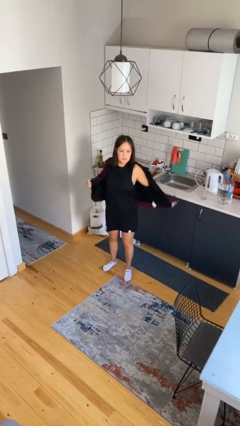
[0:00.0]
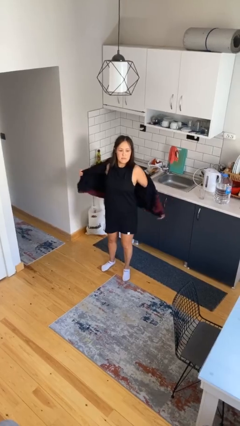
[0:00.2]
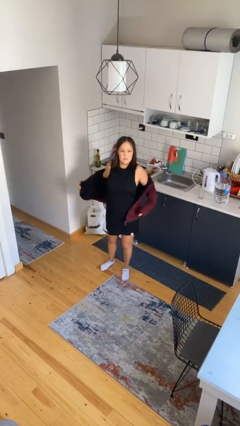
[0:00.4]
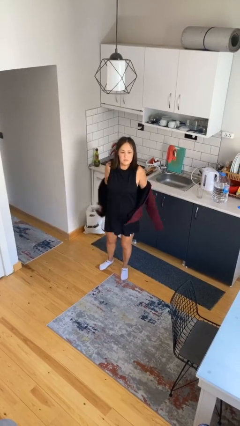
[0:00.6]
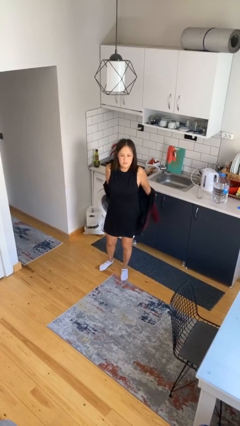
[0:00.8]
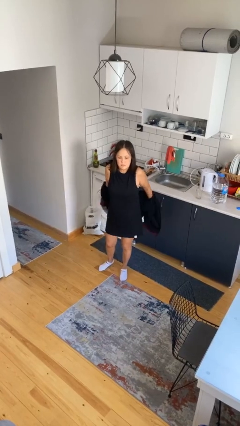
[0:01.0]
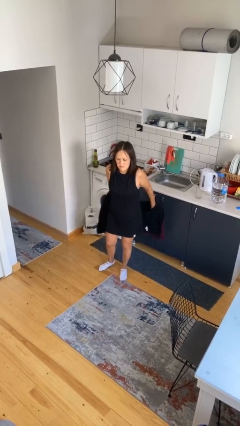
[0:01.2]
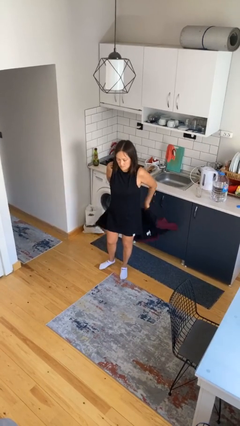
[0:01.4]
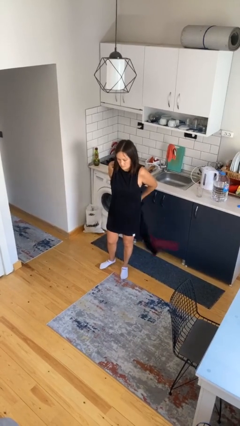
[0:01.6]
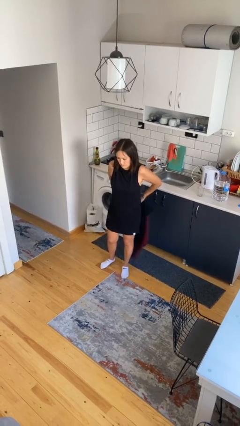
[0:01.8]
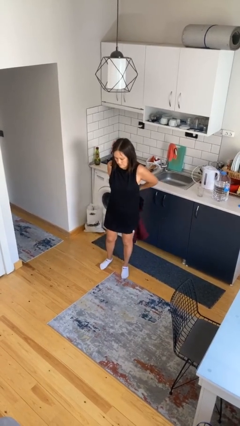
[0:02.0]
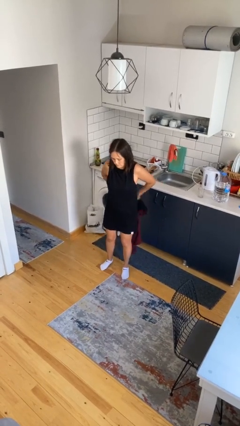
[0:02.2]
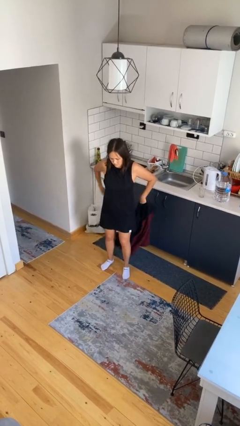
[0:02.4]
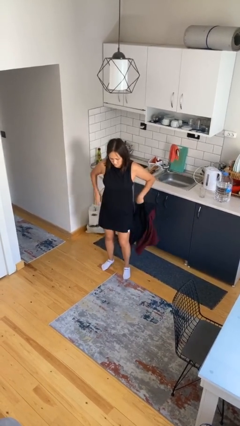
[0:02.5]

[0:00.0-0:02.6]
person takes off jacket

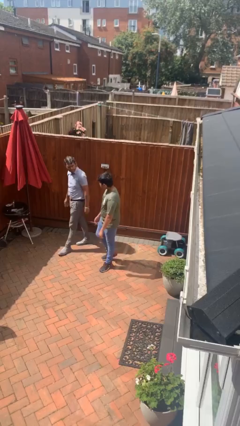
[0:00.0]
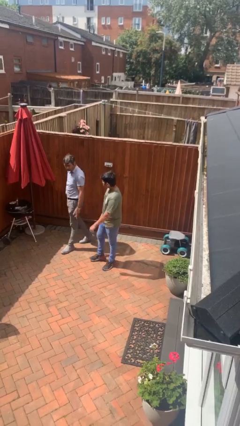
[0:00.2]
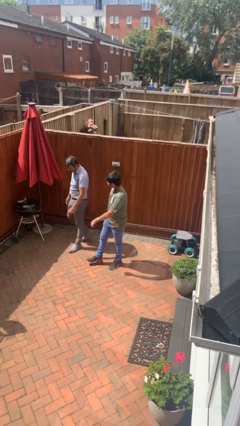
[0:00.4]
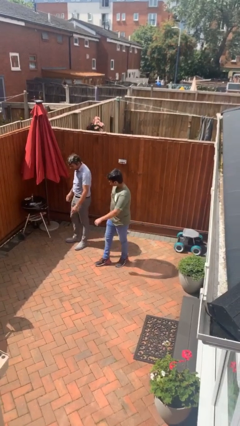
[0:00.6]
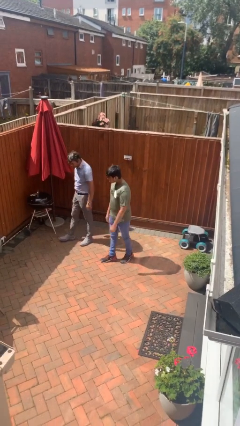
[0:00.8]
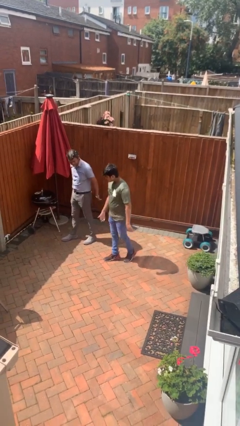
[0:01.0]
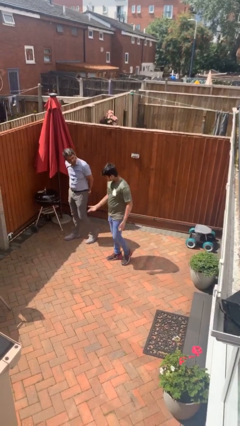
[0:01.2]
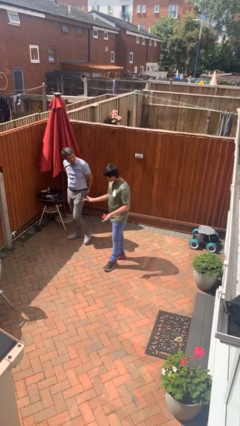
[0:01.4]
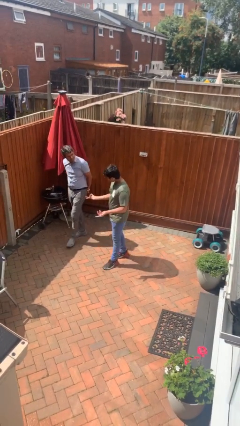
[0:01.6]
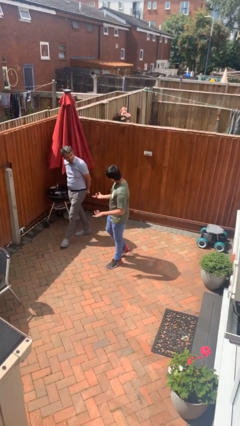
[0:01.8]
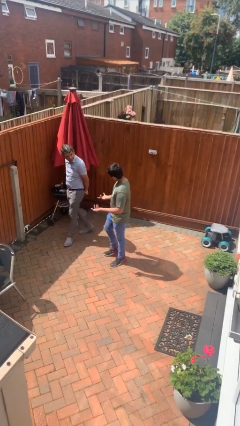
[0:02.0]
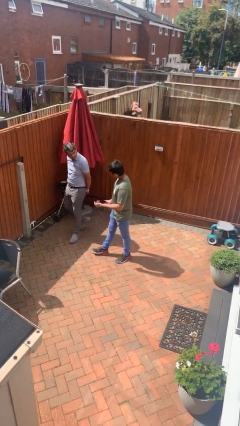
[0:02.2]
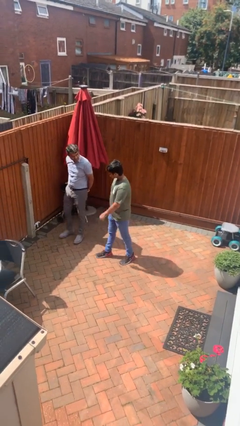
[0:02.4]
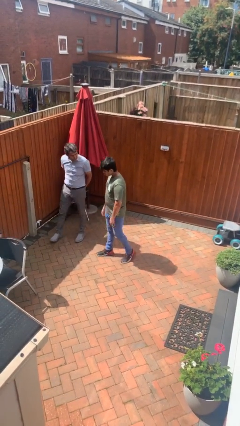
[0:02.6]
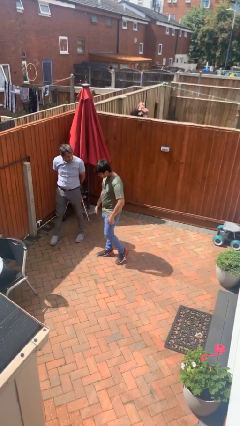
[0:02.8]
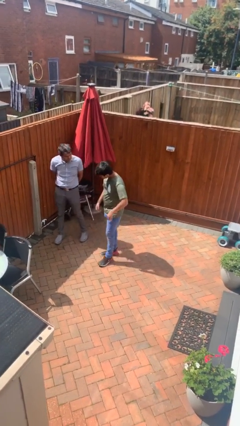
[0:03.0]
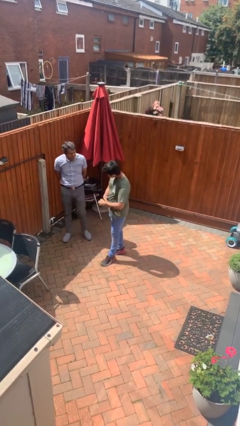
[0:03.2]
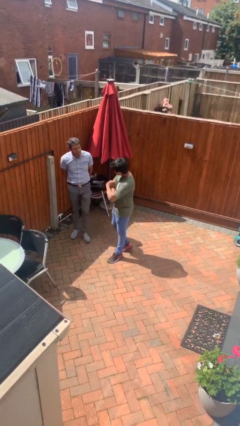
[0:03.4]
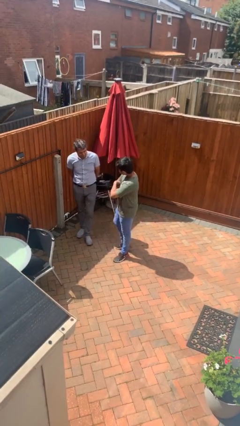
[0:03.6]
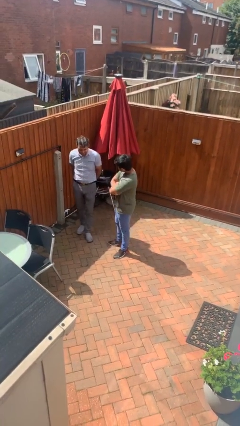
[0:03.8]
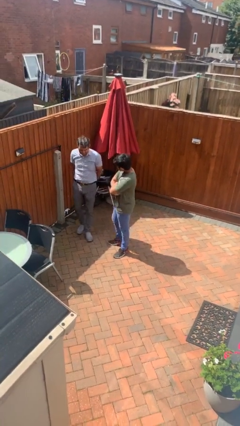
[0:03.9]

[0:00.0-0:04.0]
person talks to person

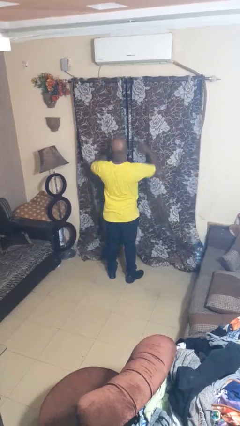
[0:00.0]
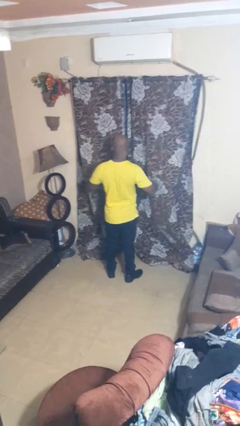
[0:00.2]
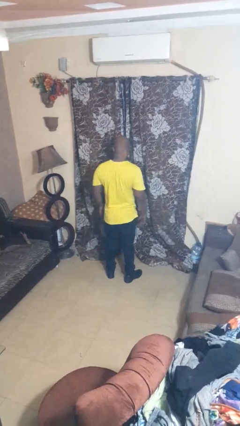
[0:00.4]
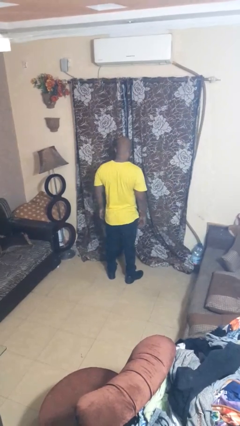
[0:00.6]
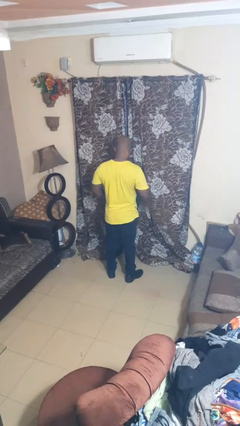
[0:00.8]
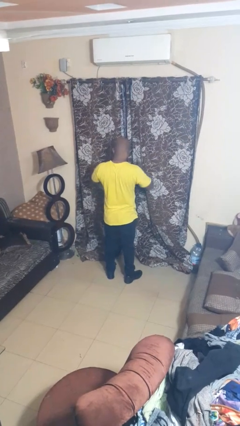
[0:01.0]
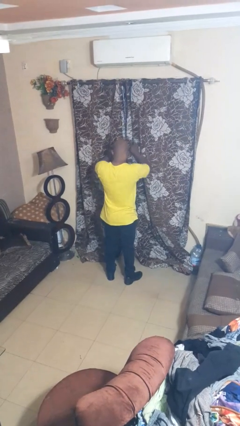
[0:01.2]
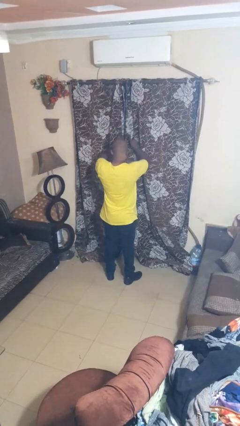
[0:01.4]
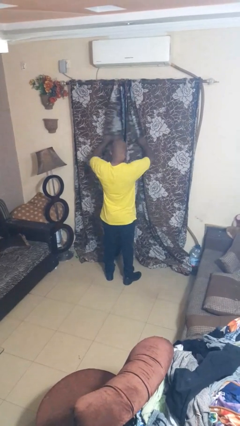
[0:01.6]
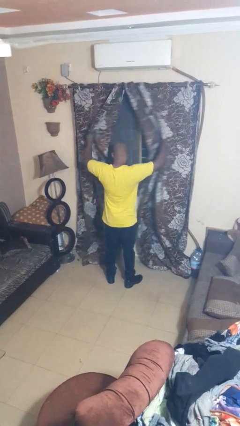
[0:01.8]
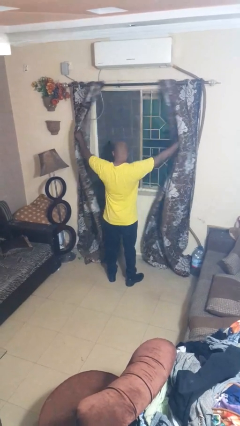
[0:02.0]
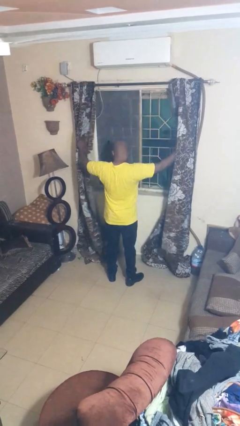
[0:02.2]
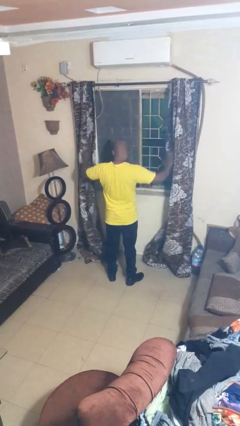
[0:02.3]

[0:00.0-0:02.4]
person opens curtains

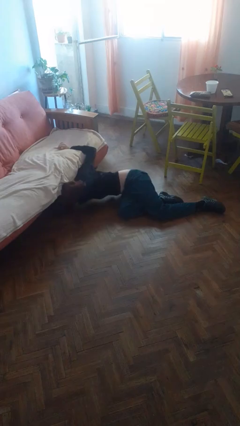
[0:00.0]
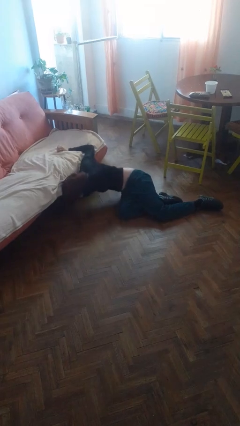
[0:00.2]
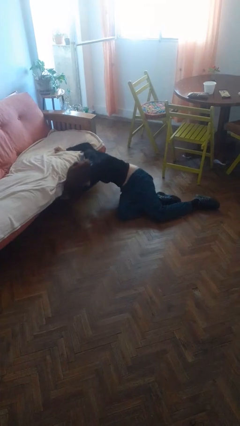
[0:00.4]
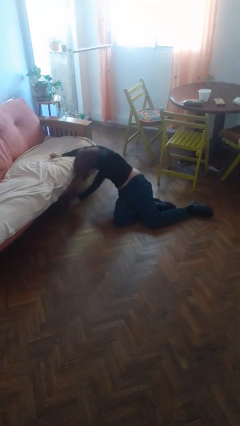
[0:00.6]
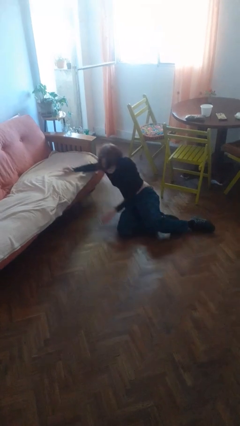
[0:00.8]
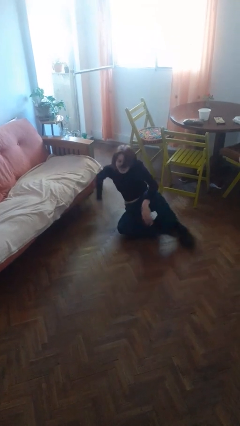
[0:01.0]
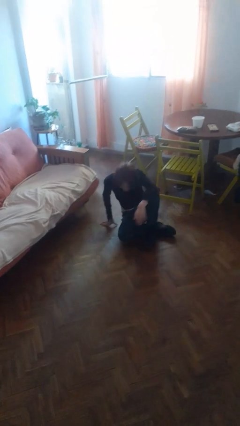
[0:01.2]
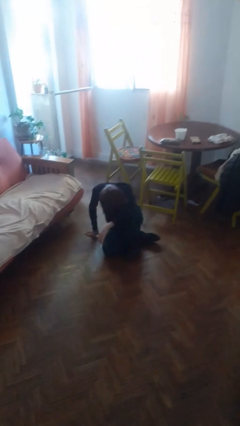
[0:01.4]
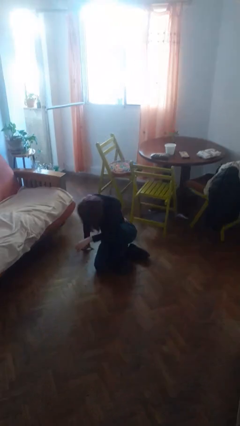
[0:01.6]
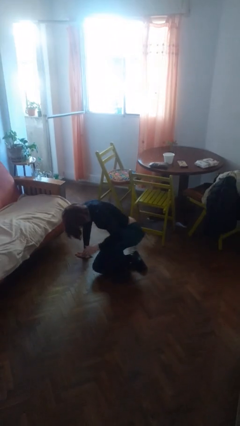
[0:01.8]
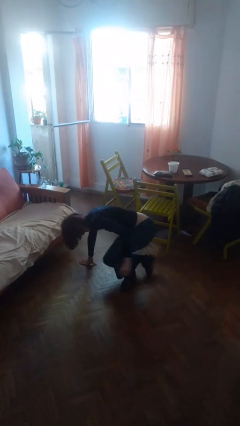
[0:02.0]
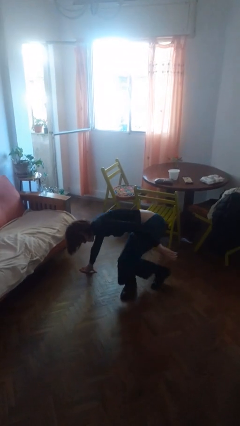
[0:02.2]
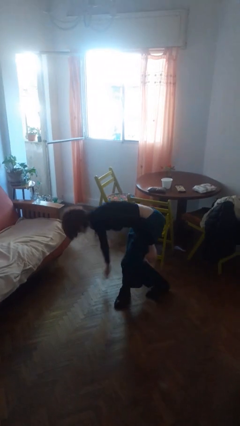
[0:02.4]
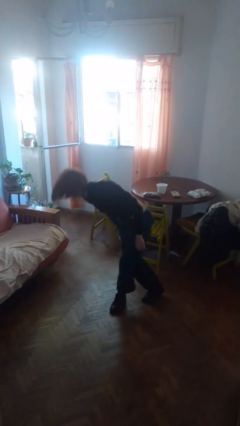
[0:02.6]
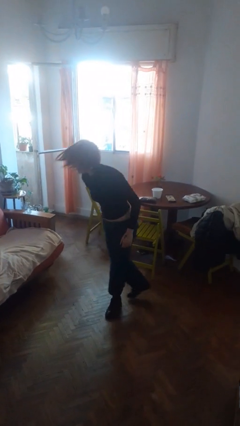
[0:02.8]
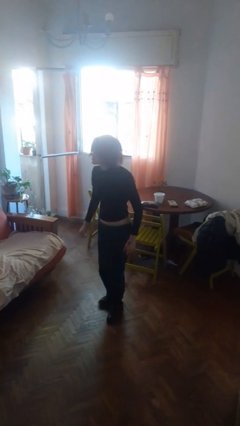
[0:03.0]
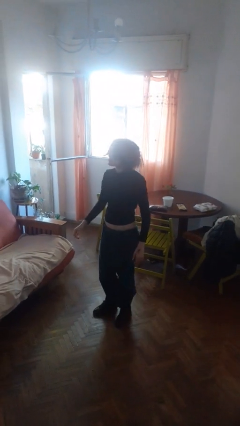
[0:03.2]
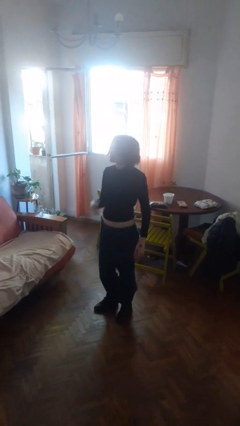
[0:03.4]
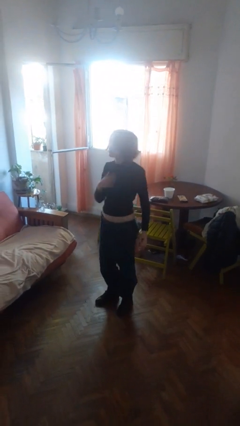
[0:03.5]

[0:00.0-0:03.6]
person stands up from floor

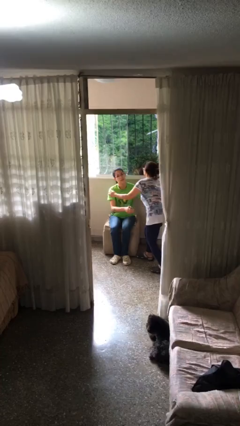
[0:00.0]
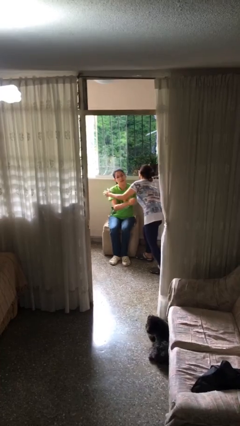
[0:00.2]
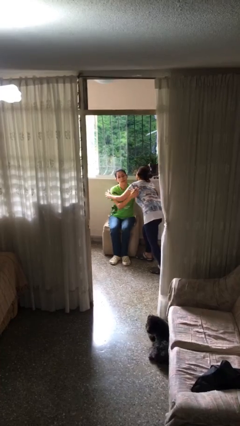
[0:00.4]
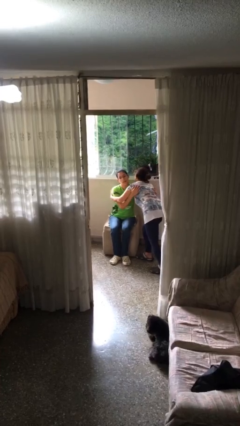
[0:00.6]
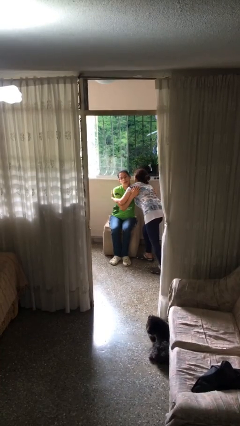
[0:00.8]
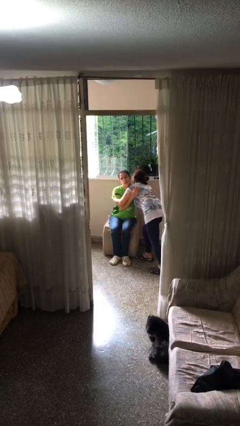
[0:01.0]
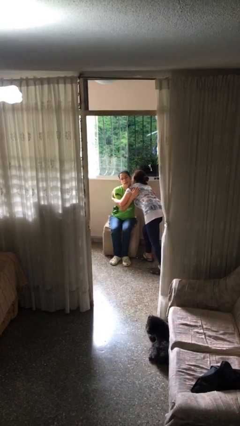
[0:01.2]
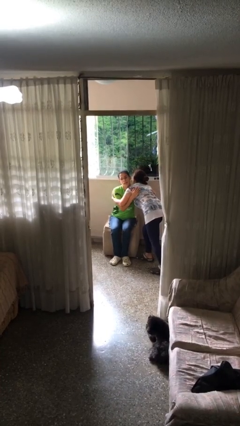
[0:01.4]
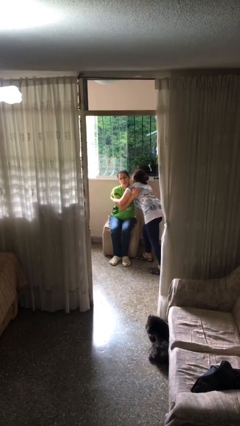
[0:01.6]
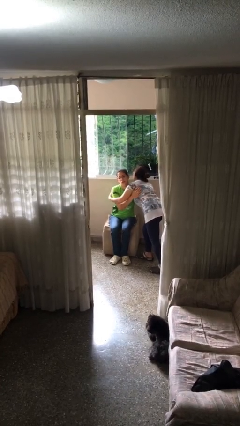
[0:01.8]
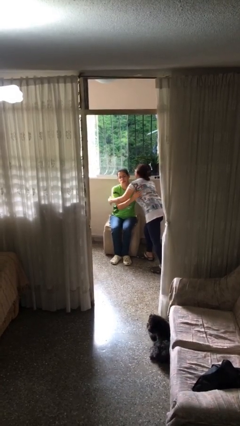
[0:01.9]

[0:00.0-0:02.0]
person embraces person

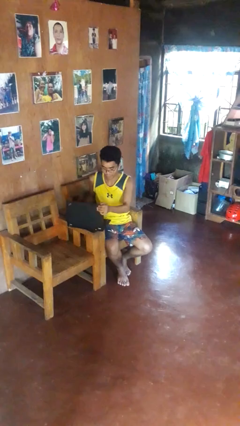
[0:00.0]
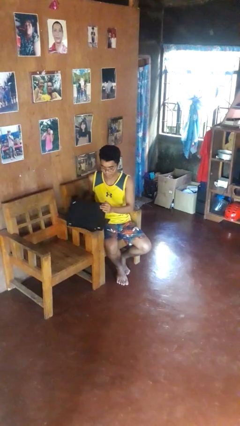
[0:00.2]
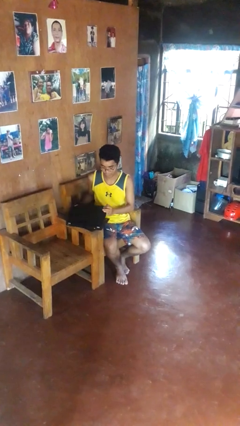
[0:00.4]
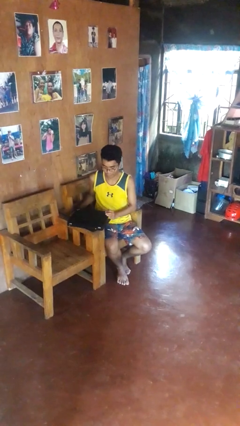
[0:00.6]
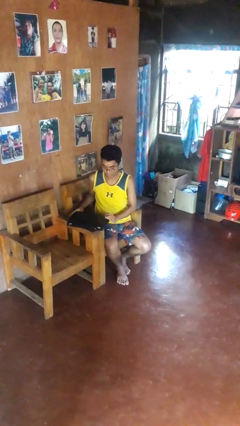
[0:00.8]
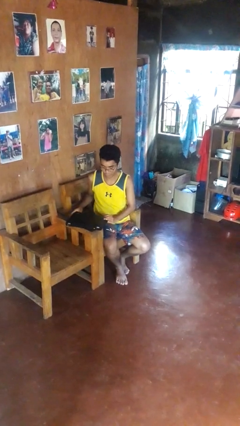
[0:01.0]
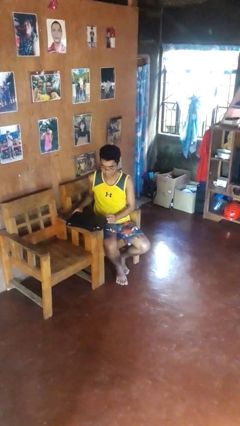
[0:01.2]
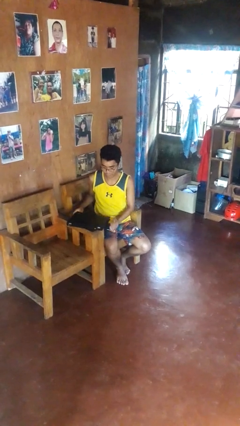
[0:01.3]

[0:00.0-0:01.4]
person closes laptop

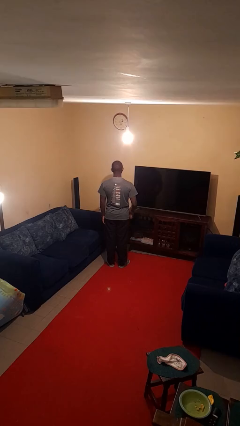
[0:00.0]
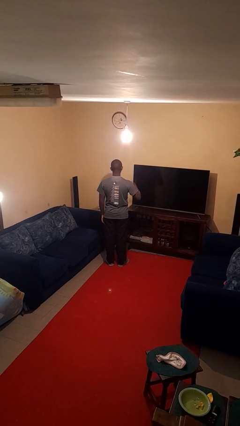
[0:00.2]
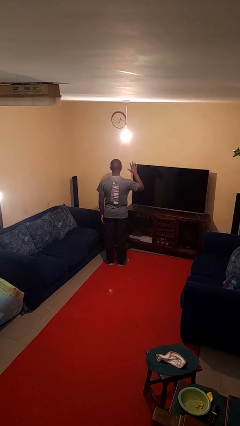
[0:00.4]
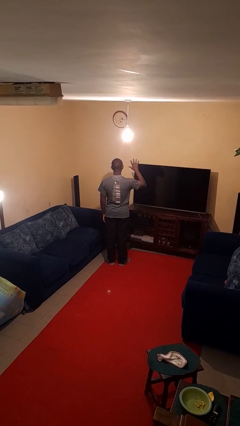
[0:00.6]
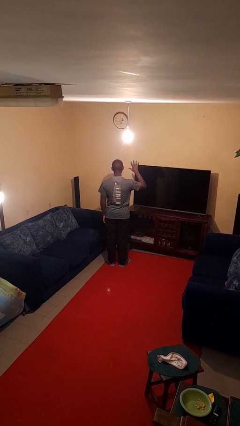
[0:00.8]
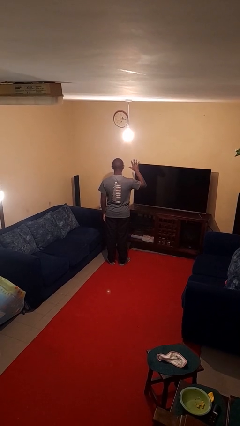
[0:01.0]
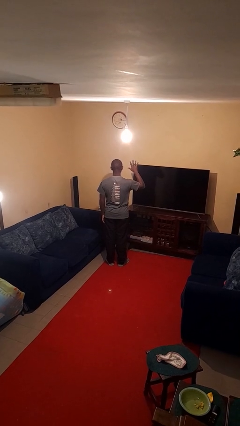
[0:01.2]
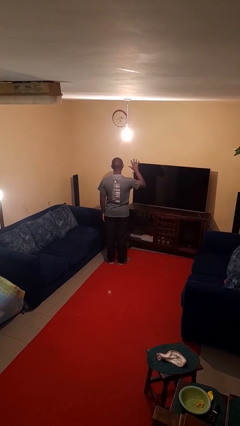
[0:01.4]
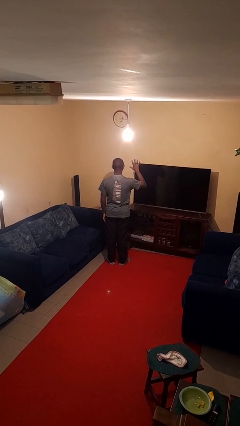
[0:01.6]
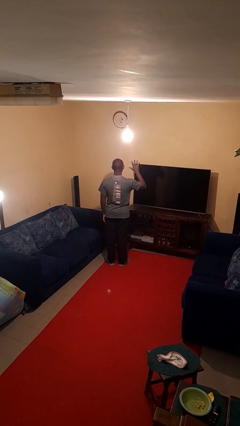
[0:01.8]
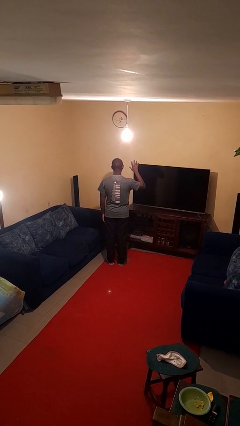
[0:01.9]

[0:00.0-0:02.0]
person gestures number five
